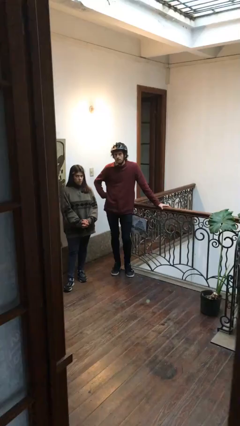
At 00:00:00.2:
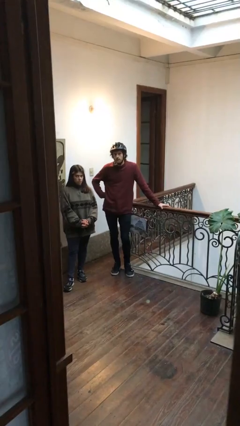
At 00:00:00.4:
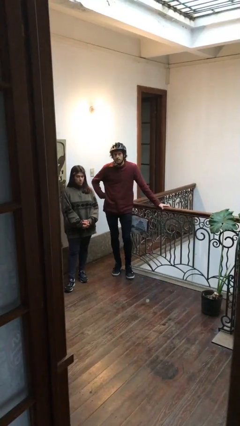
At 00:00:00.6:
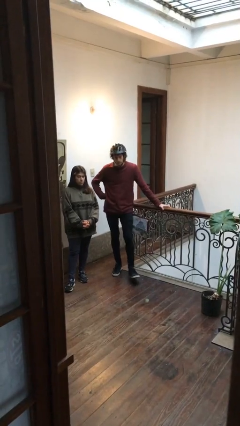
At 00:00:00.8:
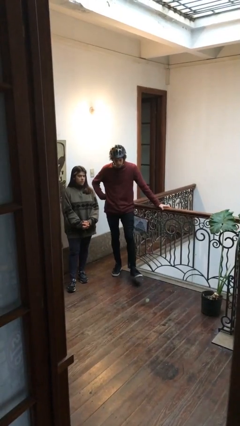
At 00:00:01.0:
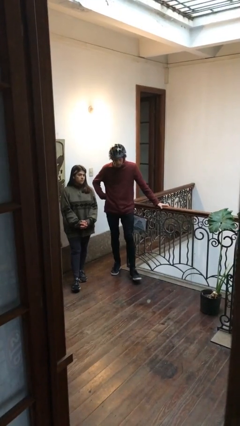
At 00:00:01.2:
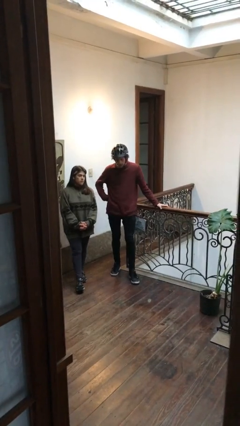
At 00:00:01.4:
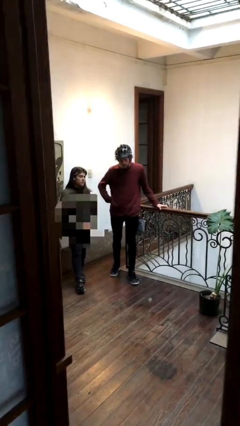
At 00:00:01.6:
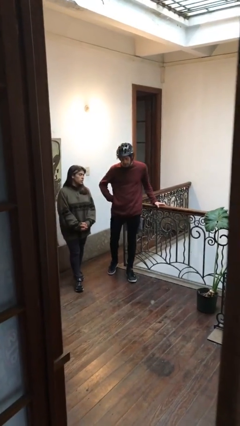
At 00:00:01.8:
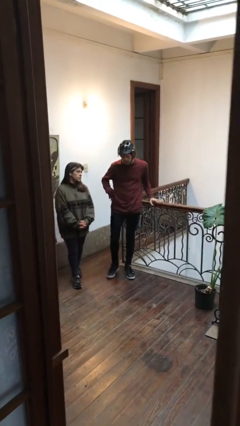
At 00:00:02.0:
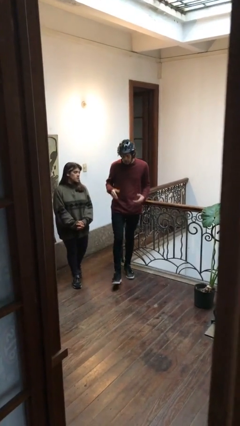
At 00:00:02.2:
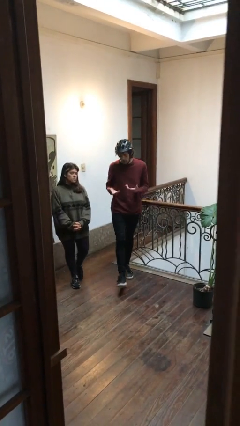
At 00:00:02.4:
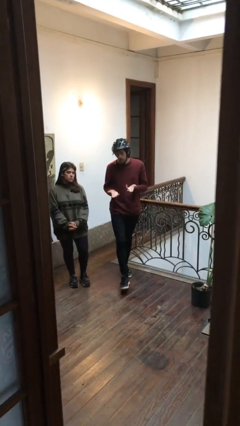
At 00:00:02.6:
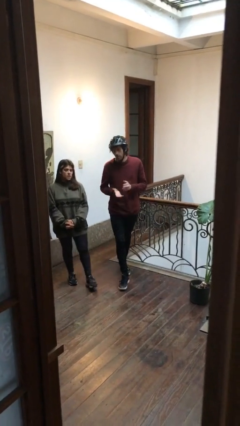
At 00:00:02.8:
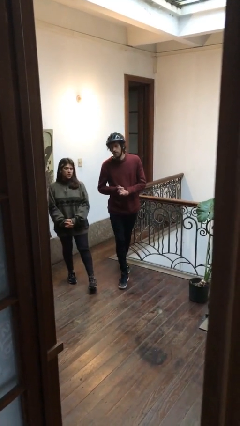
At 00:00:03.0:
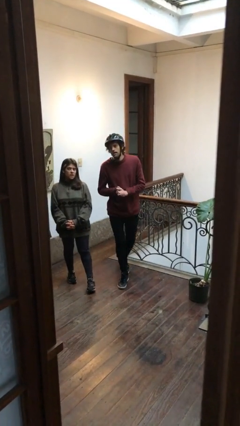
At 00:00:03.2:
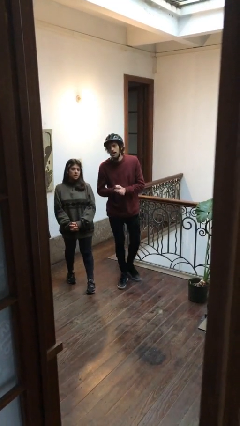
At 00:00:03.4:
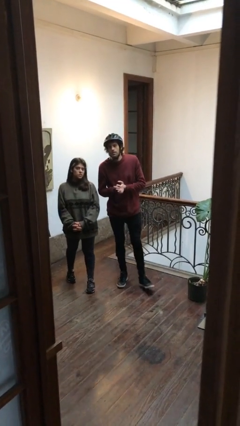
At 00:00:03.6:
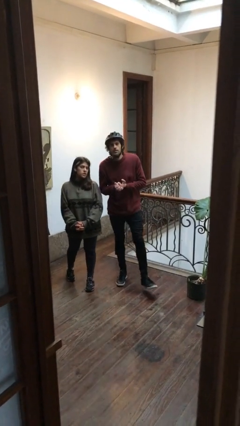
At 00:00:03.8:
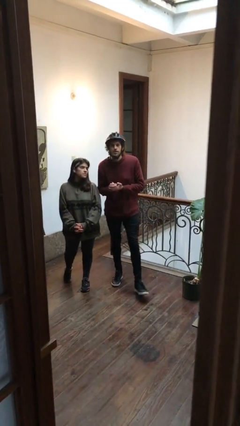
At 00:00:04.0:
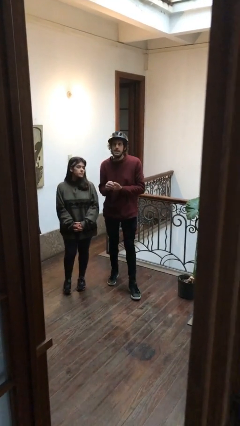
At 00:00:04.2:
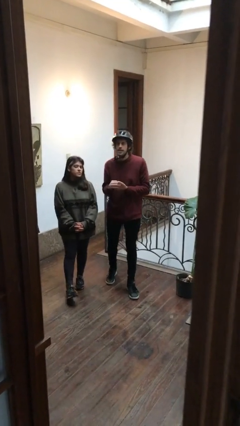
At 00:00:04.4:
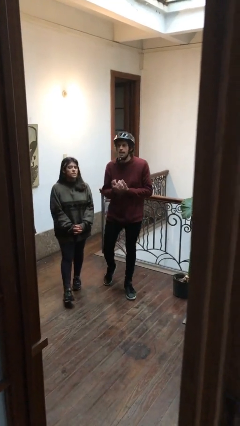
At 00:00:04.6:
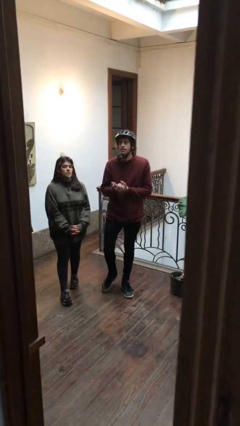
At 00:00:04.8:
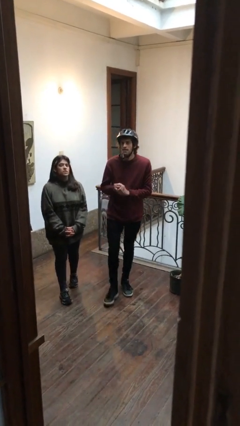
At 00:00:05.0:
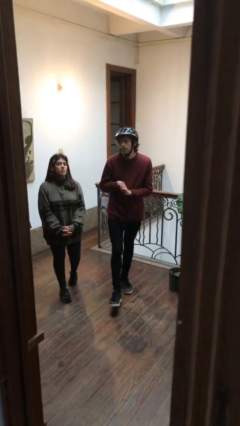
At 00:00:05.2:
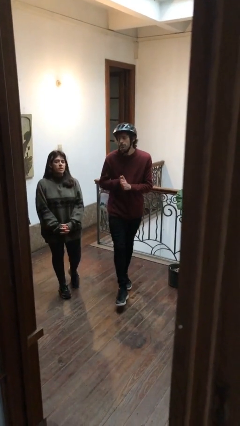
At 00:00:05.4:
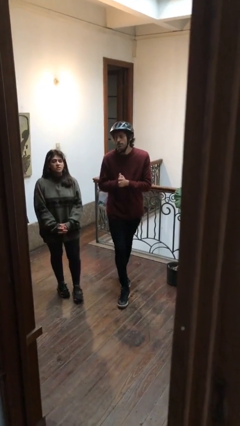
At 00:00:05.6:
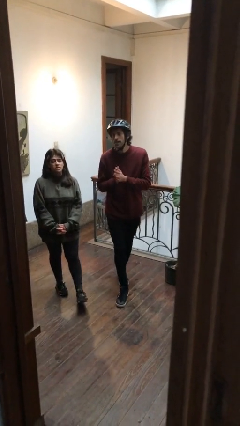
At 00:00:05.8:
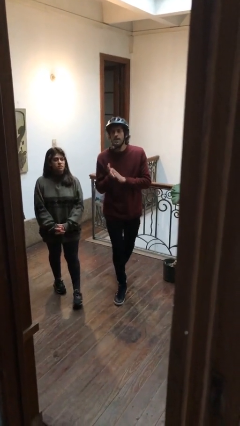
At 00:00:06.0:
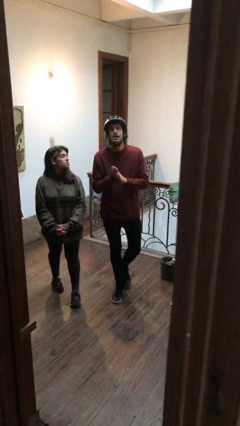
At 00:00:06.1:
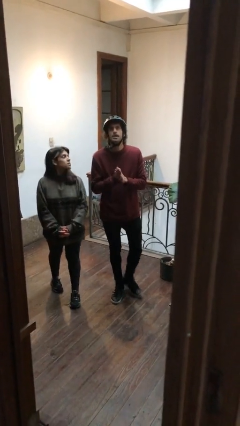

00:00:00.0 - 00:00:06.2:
person talks to person

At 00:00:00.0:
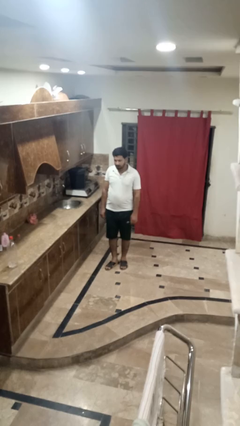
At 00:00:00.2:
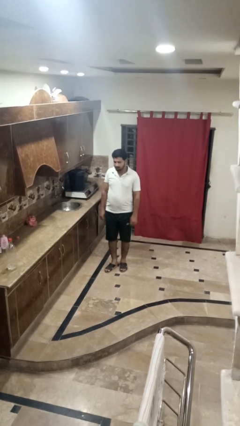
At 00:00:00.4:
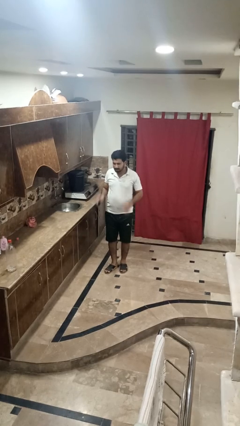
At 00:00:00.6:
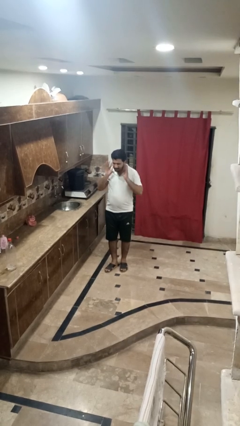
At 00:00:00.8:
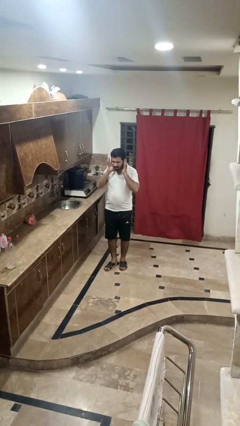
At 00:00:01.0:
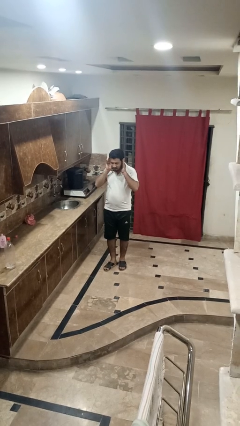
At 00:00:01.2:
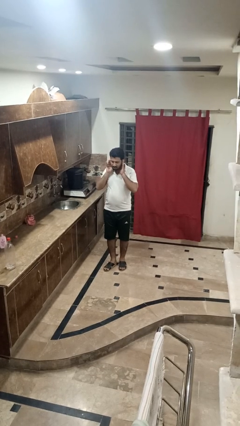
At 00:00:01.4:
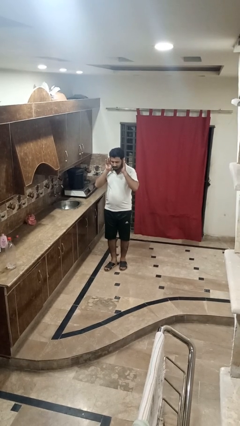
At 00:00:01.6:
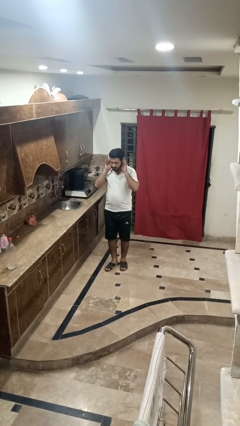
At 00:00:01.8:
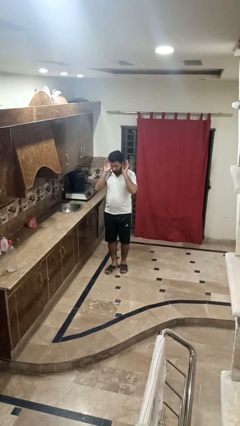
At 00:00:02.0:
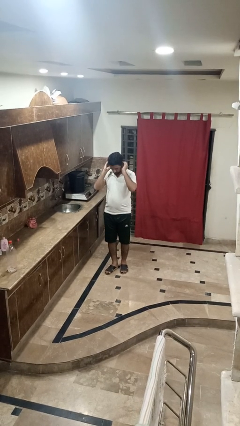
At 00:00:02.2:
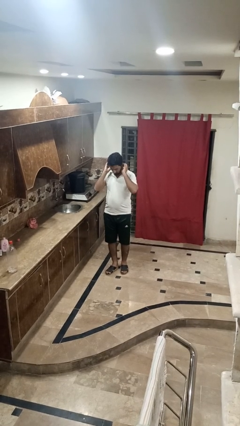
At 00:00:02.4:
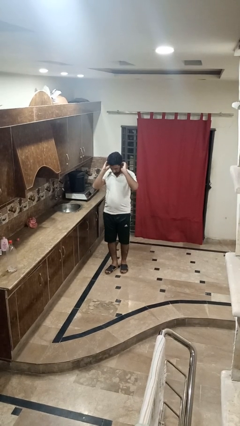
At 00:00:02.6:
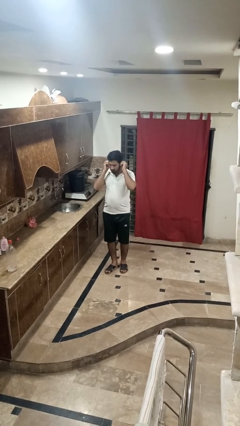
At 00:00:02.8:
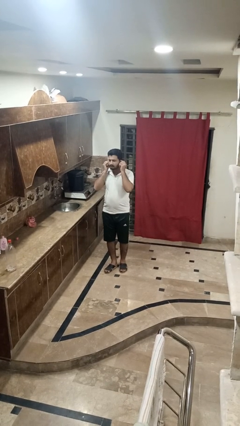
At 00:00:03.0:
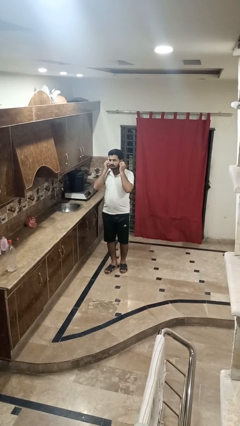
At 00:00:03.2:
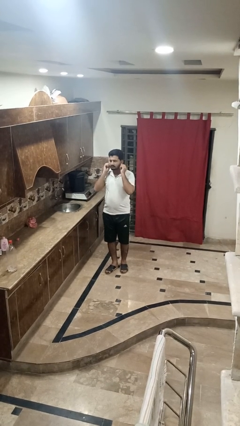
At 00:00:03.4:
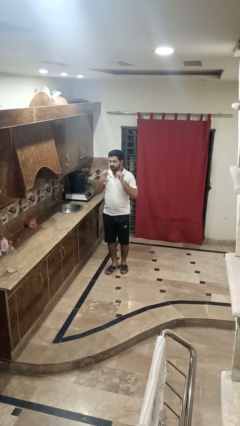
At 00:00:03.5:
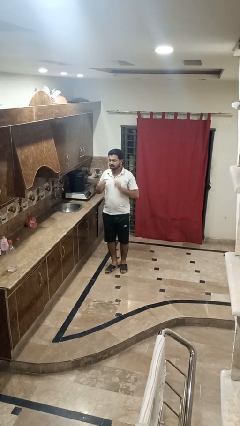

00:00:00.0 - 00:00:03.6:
person touches earlobe

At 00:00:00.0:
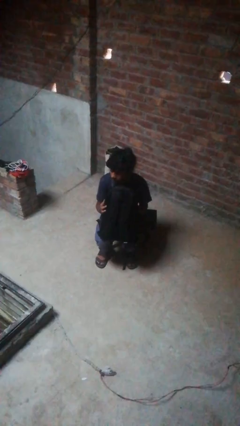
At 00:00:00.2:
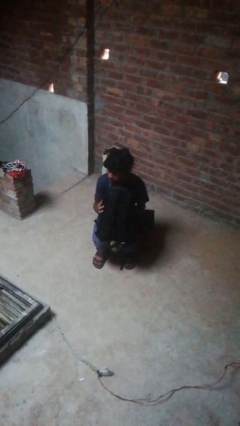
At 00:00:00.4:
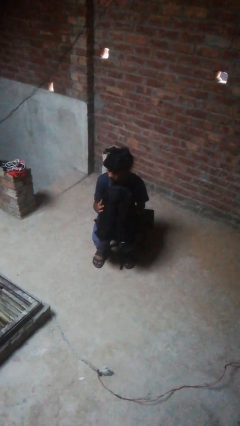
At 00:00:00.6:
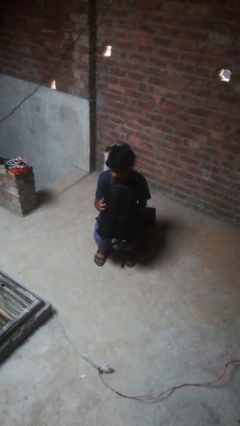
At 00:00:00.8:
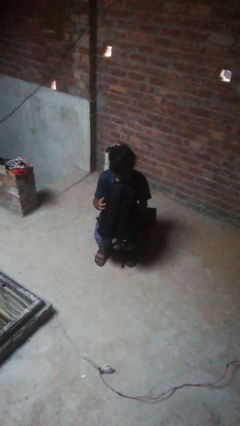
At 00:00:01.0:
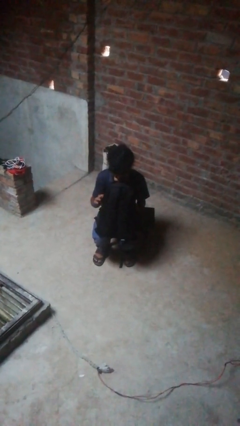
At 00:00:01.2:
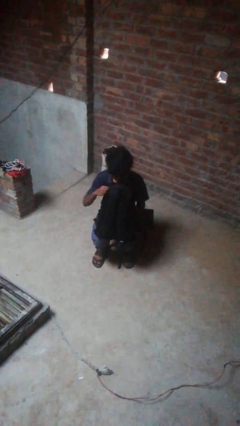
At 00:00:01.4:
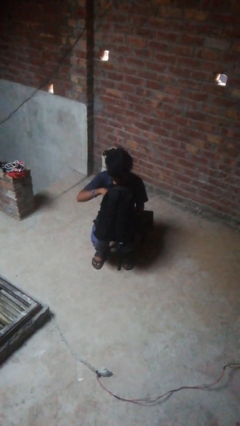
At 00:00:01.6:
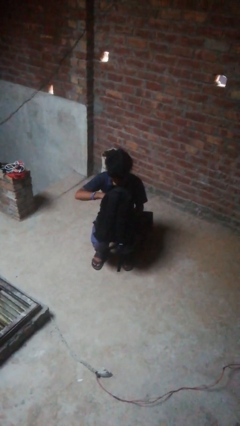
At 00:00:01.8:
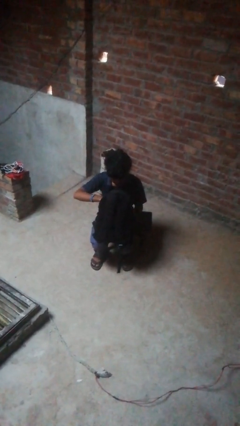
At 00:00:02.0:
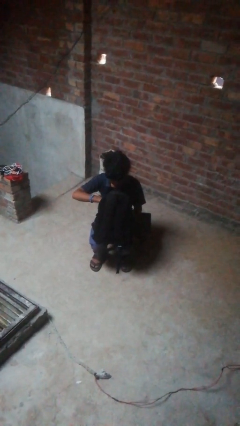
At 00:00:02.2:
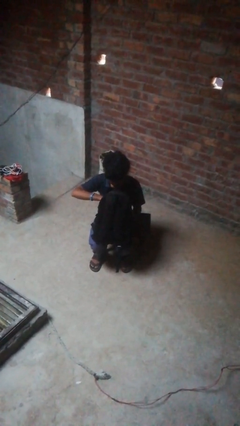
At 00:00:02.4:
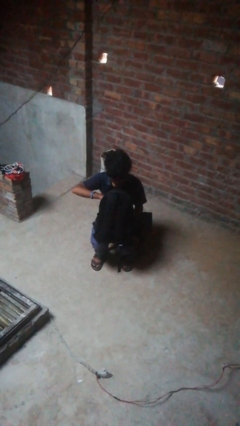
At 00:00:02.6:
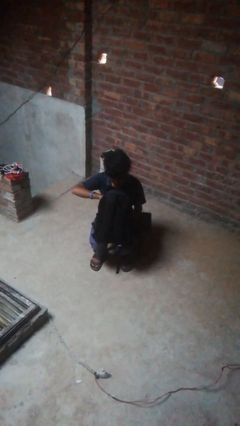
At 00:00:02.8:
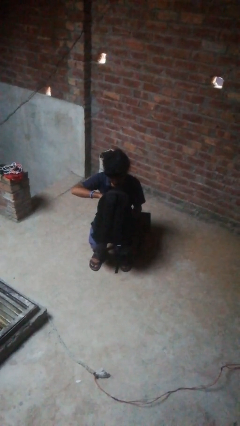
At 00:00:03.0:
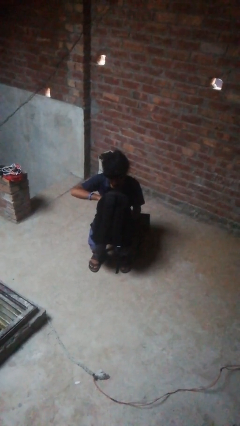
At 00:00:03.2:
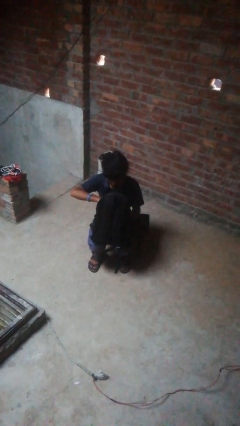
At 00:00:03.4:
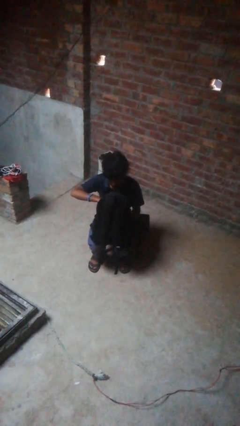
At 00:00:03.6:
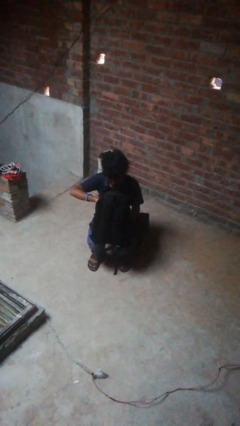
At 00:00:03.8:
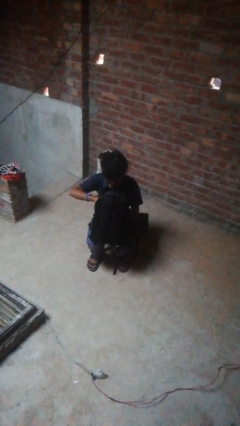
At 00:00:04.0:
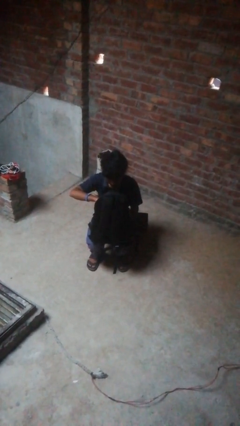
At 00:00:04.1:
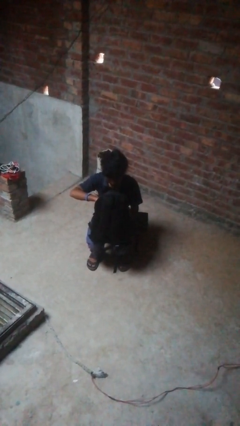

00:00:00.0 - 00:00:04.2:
person searches in backpack

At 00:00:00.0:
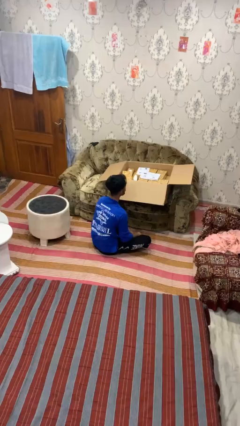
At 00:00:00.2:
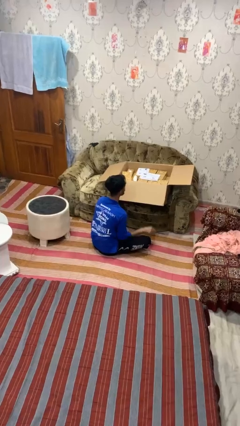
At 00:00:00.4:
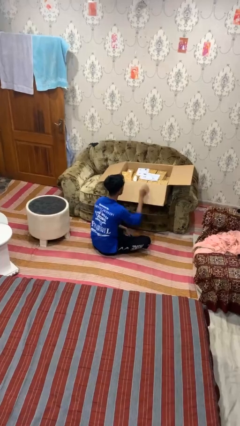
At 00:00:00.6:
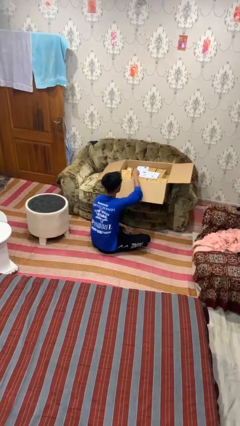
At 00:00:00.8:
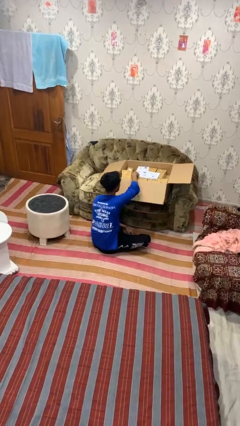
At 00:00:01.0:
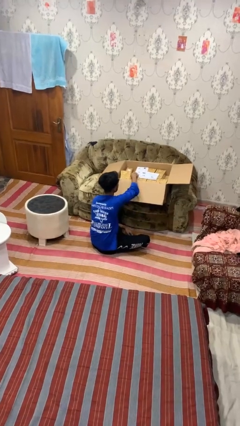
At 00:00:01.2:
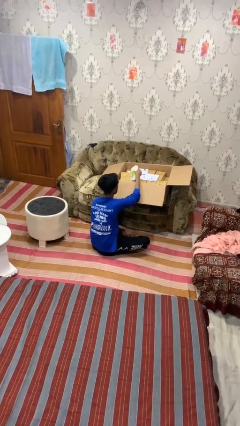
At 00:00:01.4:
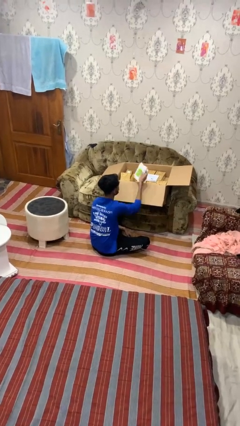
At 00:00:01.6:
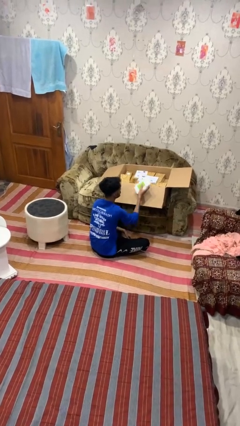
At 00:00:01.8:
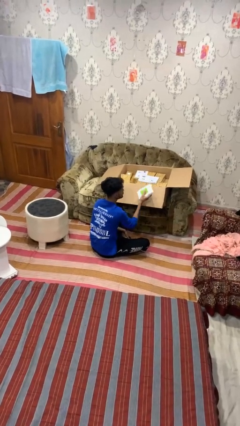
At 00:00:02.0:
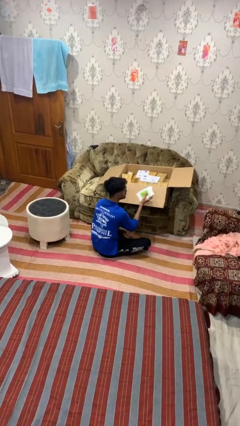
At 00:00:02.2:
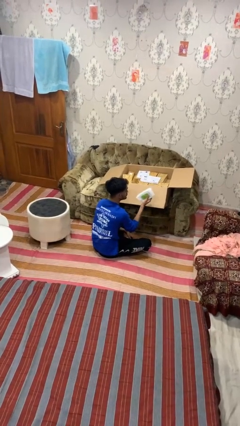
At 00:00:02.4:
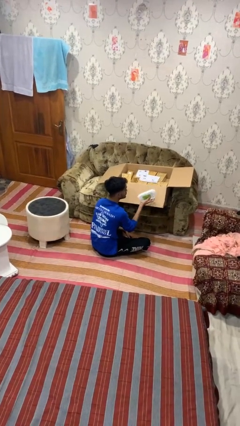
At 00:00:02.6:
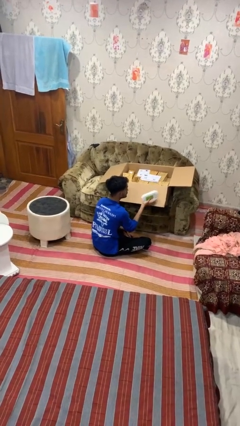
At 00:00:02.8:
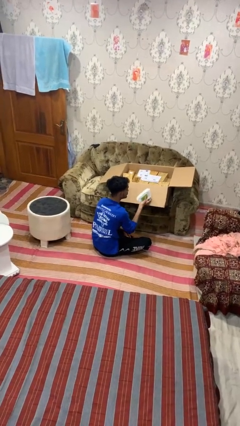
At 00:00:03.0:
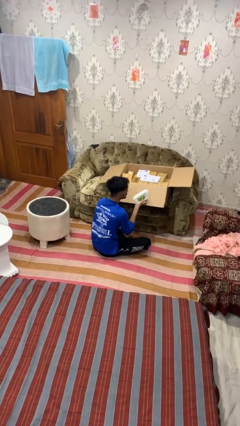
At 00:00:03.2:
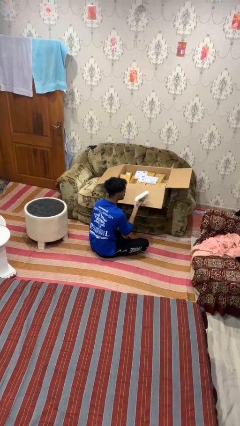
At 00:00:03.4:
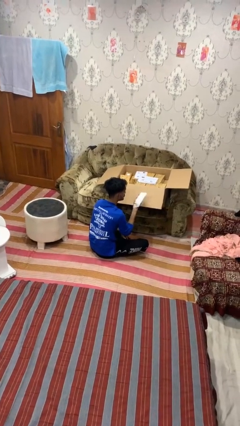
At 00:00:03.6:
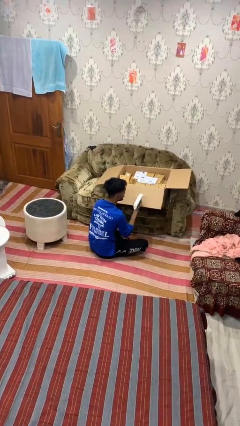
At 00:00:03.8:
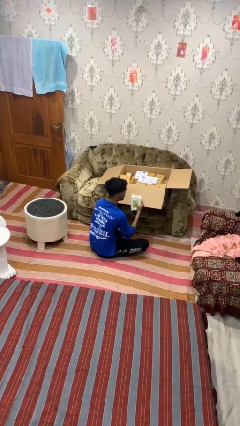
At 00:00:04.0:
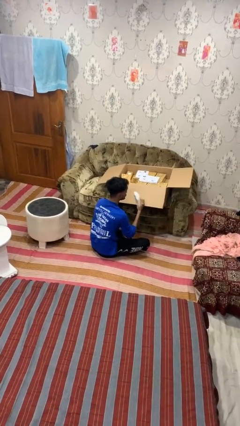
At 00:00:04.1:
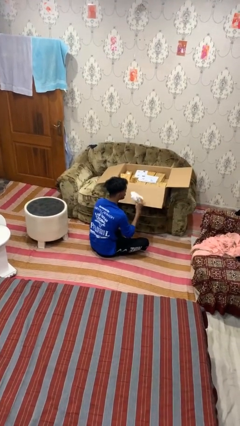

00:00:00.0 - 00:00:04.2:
person takes object from box
